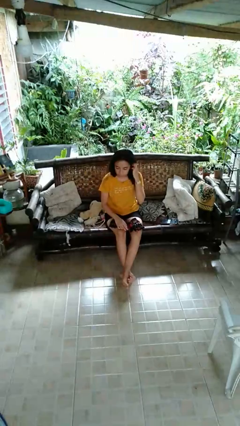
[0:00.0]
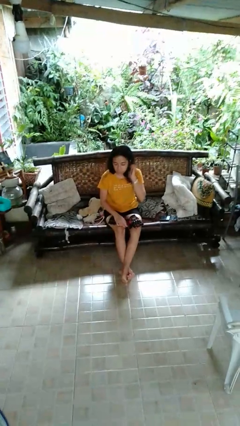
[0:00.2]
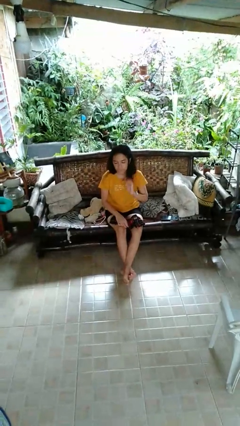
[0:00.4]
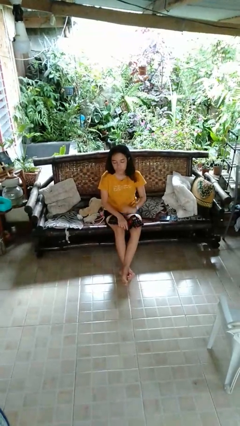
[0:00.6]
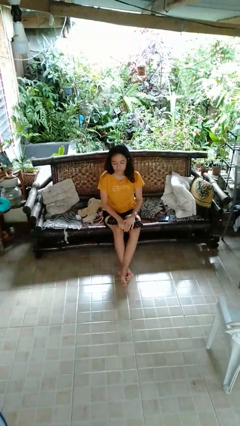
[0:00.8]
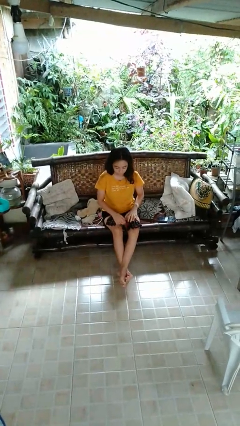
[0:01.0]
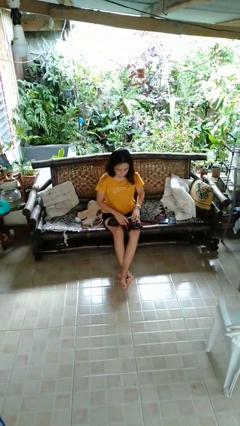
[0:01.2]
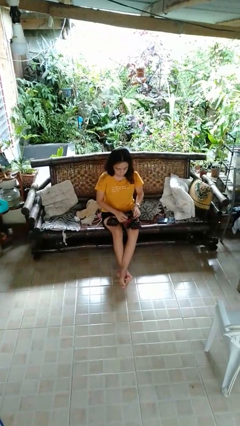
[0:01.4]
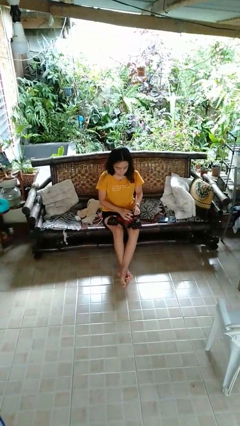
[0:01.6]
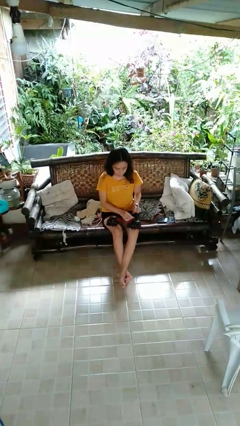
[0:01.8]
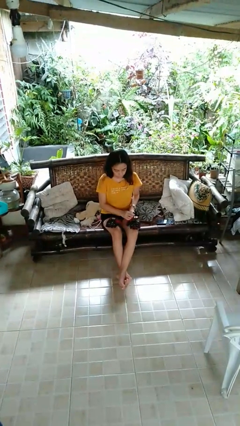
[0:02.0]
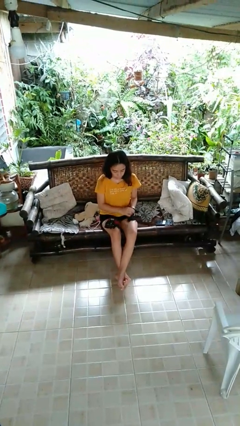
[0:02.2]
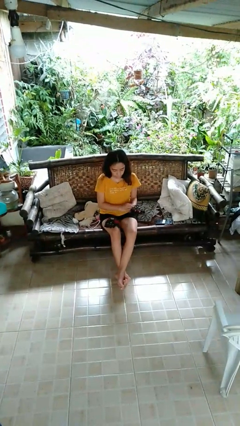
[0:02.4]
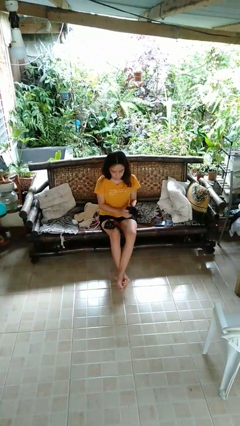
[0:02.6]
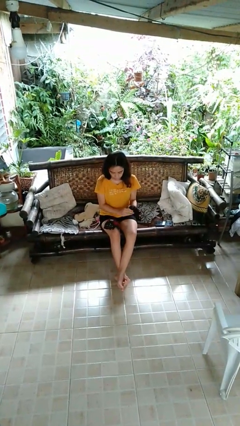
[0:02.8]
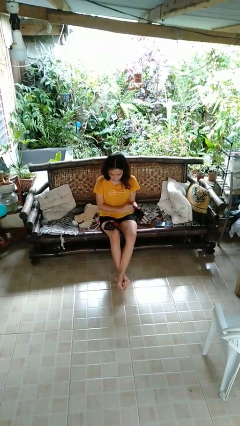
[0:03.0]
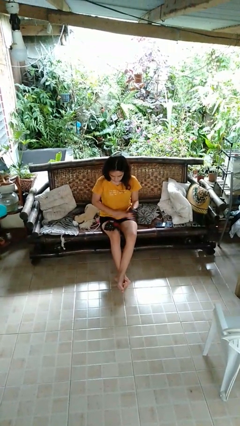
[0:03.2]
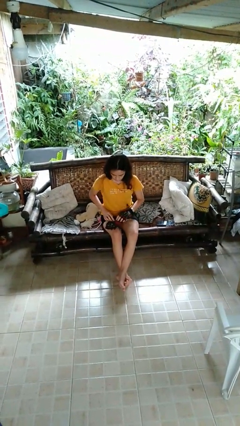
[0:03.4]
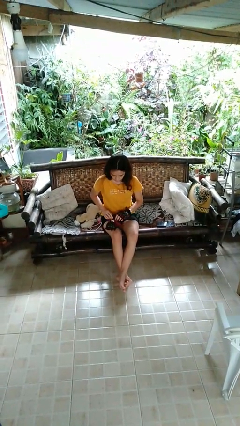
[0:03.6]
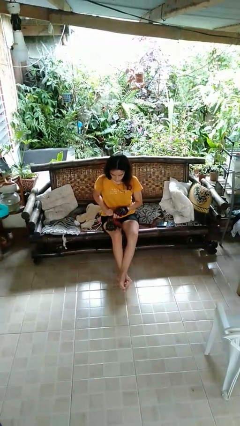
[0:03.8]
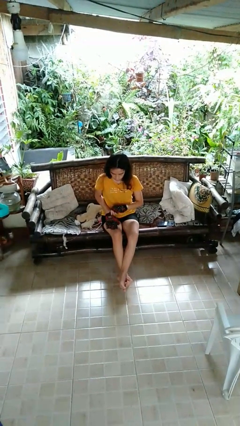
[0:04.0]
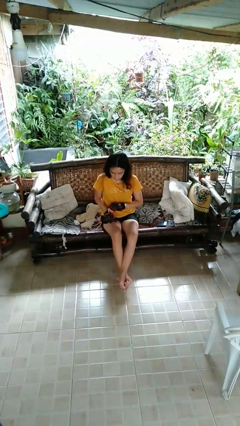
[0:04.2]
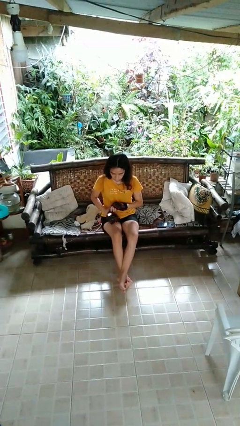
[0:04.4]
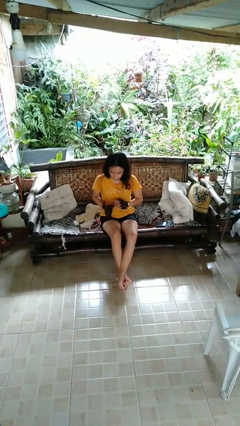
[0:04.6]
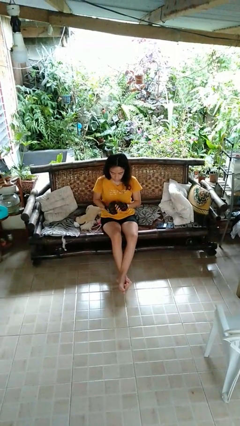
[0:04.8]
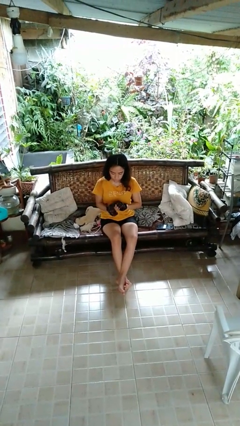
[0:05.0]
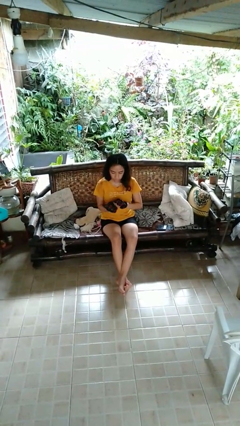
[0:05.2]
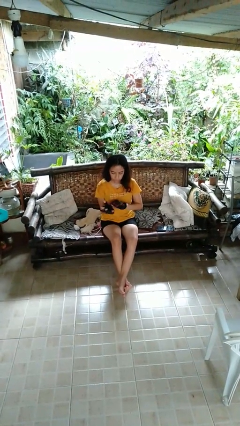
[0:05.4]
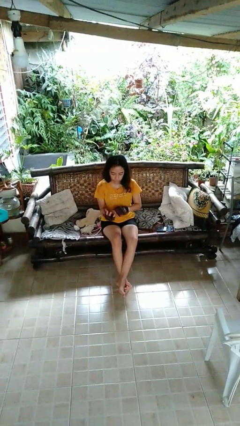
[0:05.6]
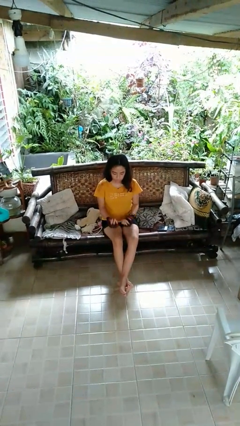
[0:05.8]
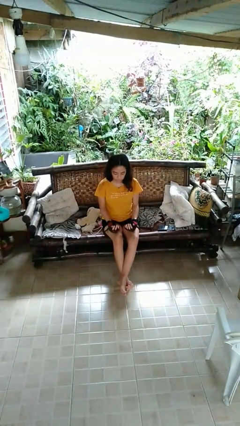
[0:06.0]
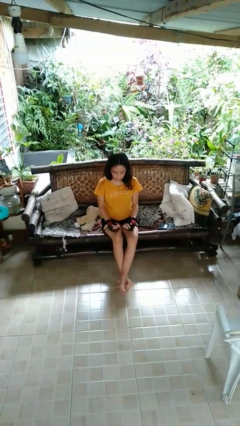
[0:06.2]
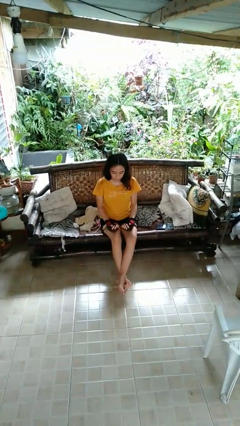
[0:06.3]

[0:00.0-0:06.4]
person puts on gloves

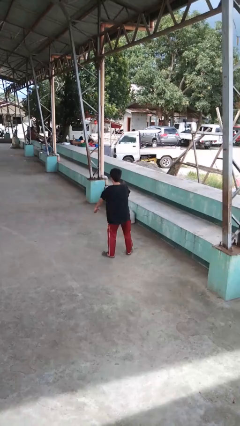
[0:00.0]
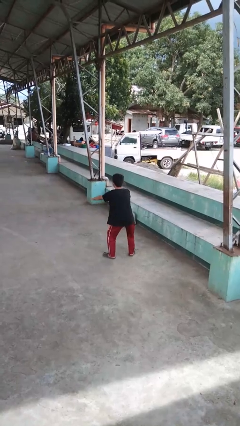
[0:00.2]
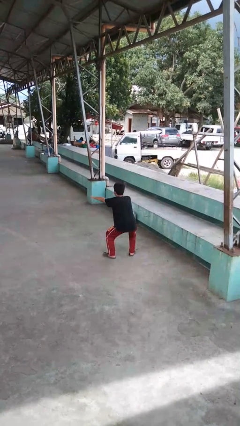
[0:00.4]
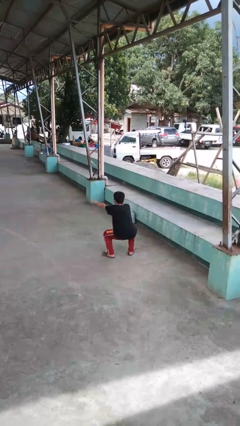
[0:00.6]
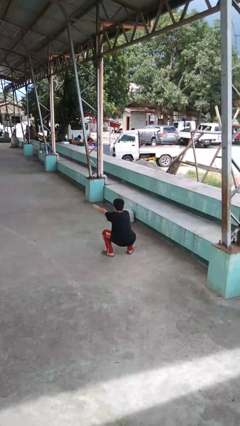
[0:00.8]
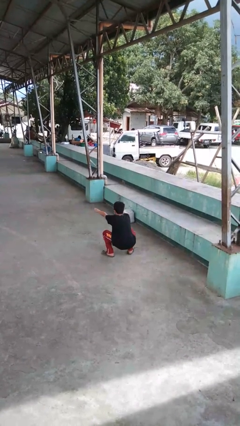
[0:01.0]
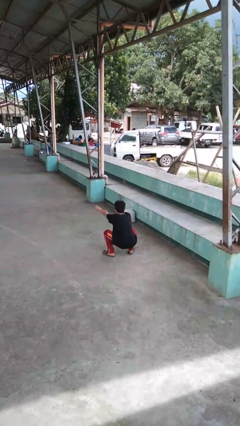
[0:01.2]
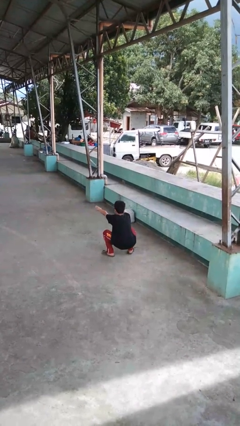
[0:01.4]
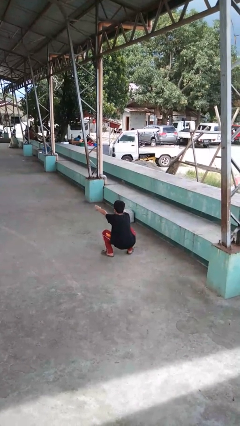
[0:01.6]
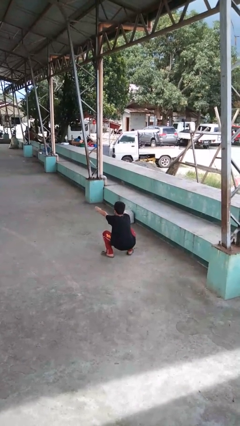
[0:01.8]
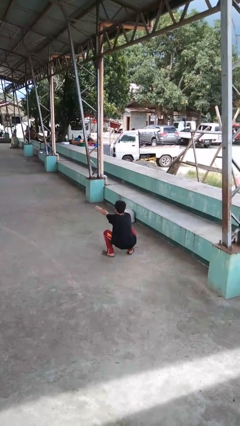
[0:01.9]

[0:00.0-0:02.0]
person squats

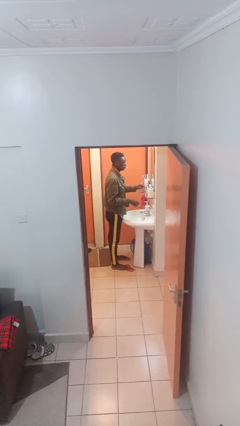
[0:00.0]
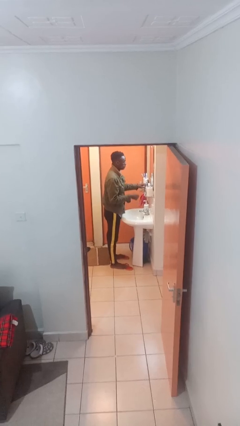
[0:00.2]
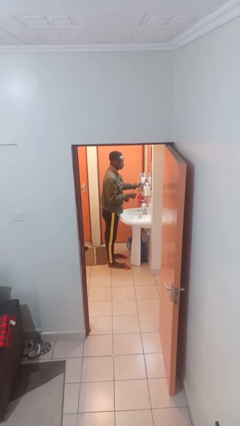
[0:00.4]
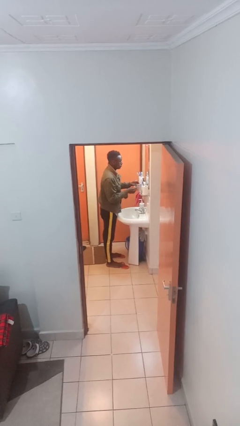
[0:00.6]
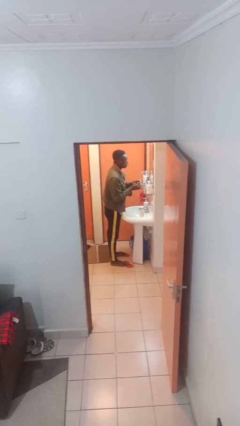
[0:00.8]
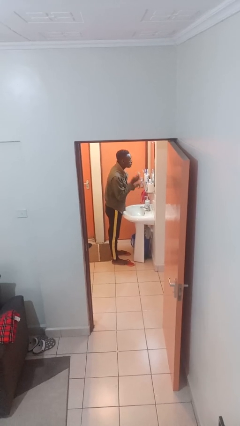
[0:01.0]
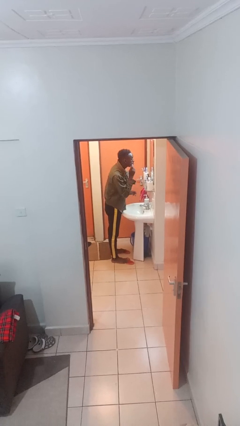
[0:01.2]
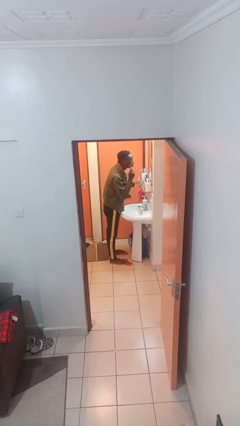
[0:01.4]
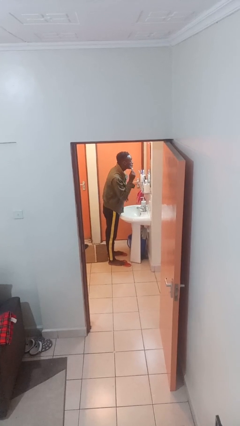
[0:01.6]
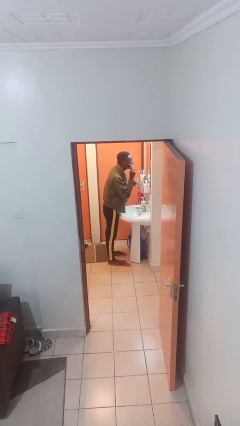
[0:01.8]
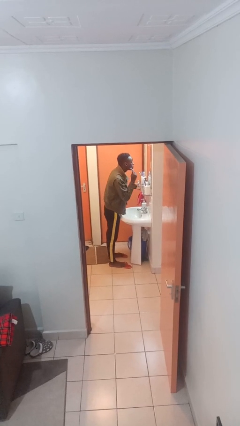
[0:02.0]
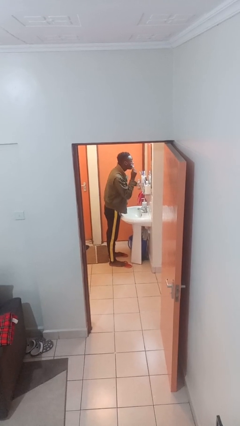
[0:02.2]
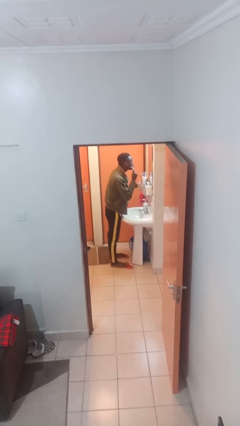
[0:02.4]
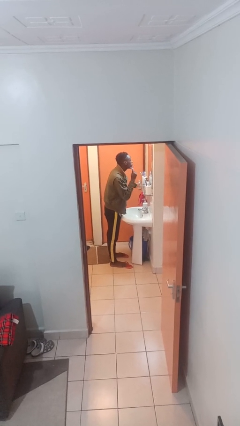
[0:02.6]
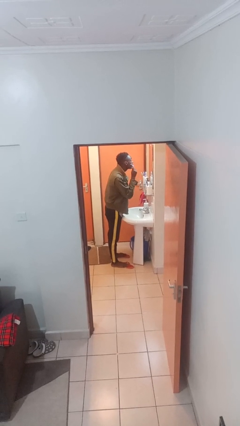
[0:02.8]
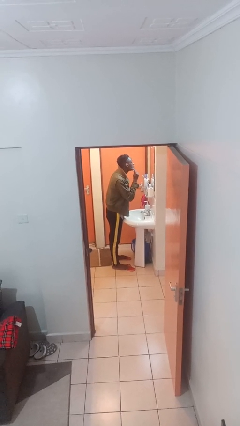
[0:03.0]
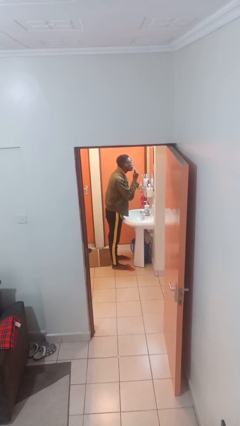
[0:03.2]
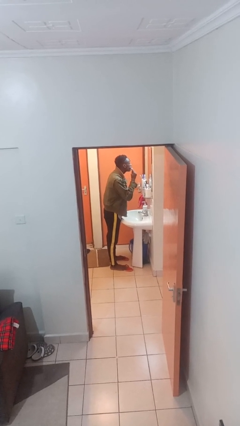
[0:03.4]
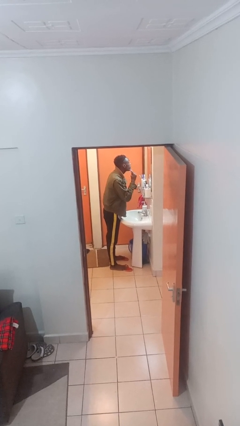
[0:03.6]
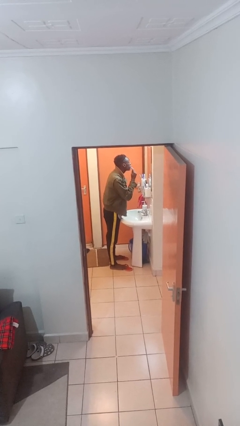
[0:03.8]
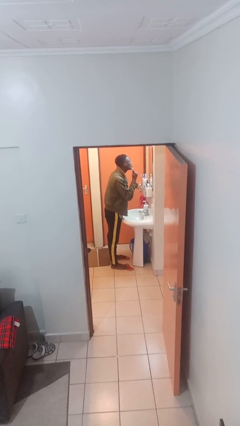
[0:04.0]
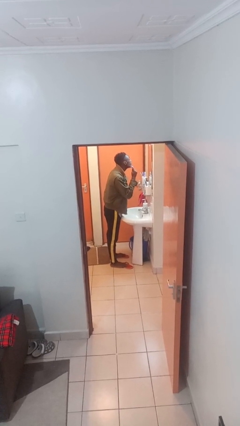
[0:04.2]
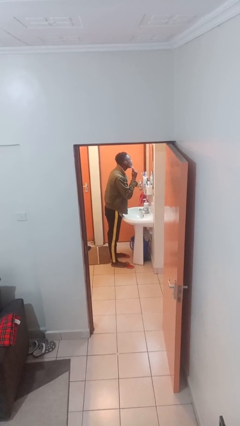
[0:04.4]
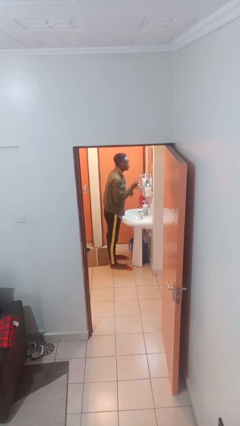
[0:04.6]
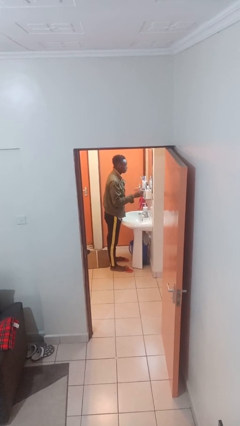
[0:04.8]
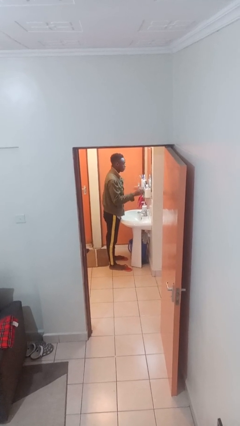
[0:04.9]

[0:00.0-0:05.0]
person shaves face

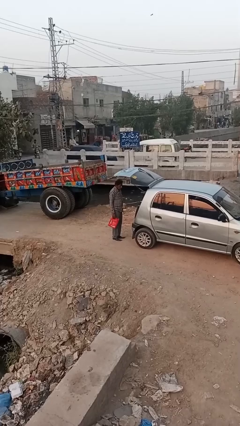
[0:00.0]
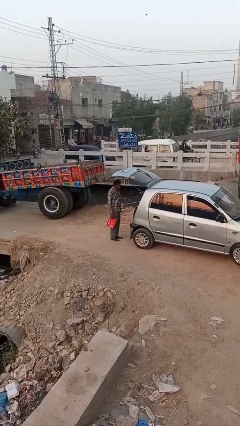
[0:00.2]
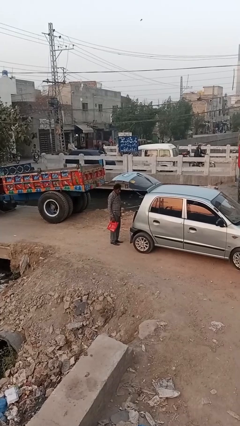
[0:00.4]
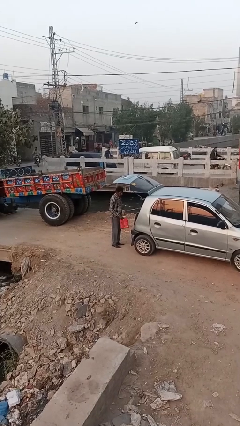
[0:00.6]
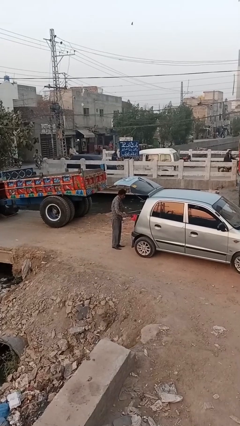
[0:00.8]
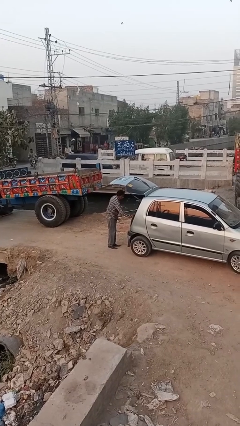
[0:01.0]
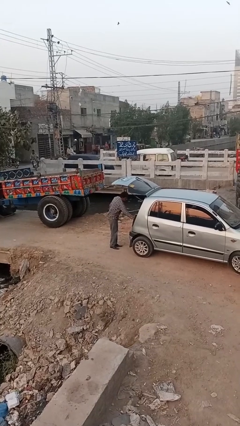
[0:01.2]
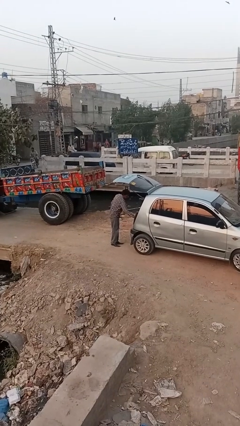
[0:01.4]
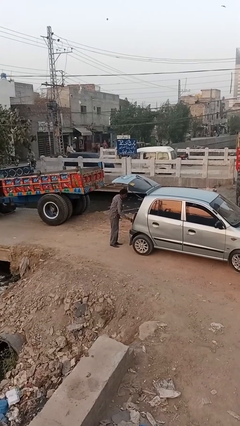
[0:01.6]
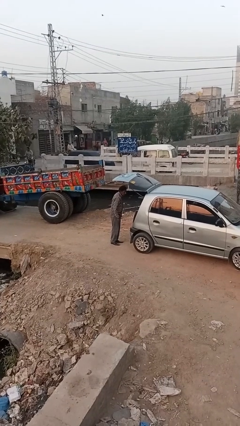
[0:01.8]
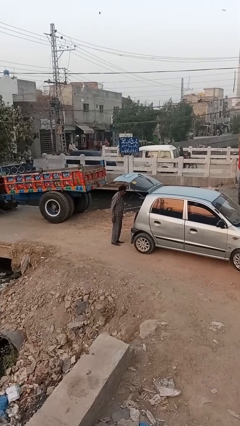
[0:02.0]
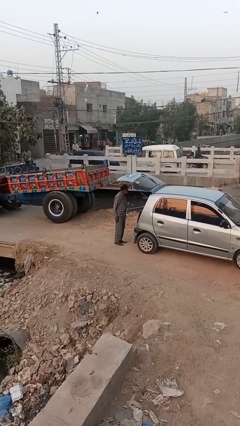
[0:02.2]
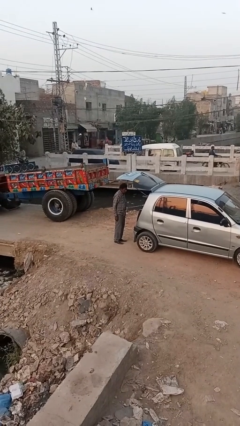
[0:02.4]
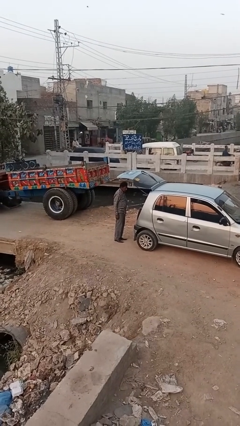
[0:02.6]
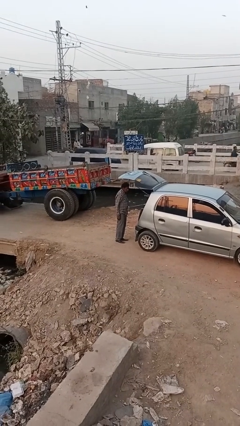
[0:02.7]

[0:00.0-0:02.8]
person loads car

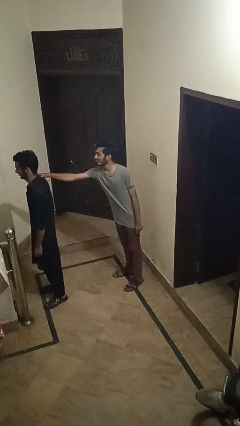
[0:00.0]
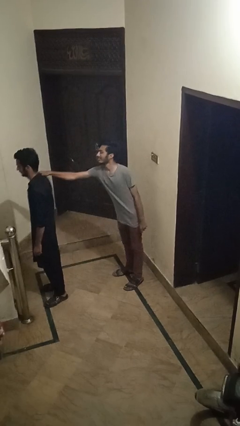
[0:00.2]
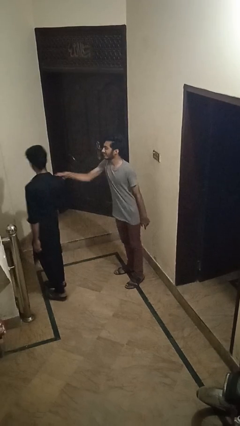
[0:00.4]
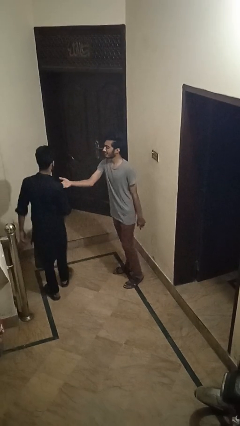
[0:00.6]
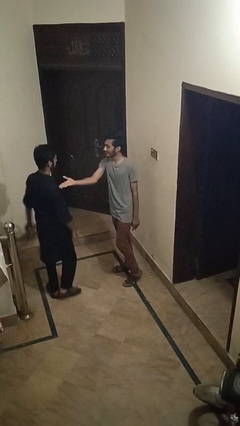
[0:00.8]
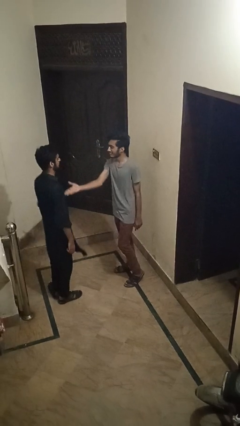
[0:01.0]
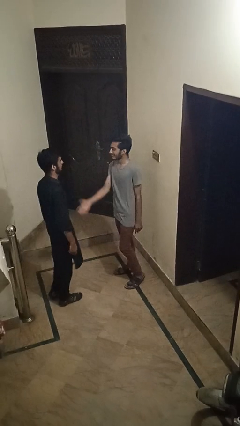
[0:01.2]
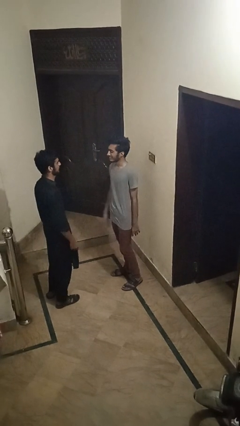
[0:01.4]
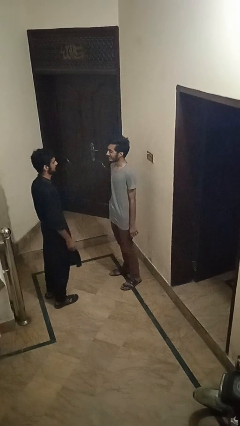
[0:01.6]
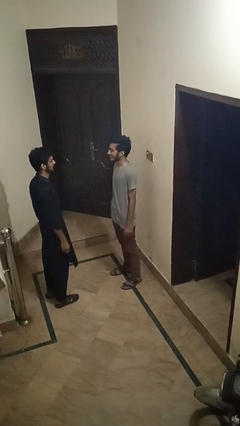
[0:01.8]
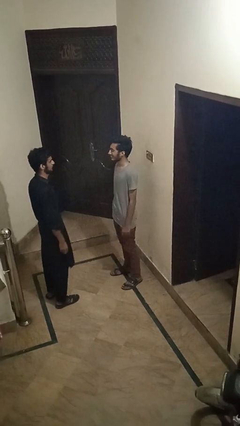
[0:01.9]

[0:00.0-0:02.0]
person spins person around

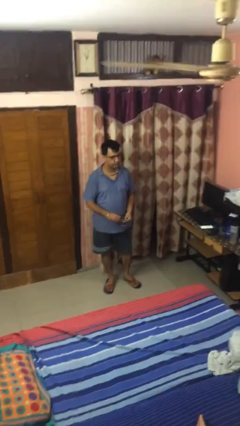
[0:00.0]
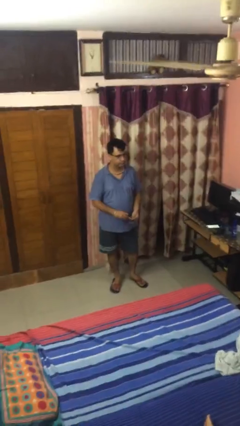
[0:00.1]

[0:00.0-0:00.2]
person takes off wristwatch
